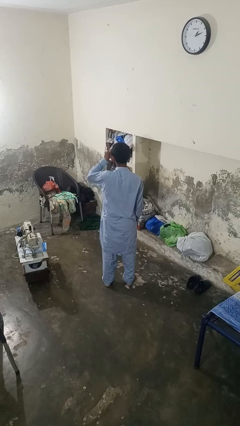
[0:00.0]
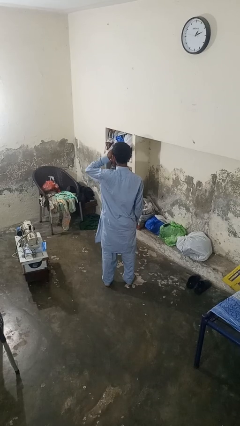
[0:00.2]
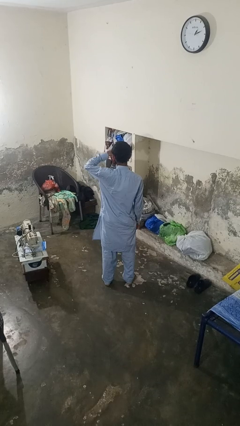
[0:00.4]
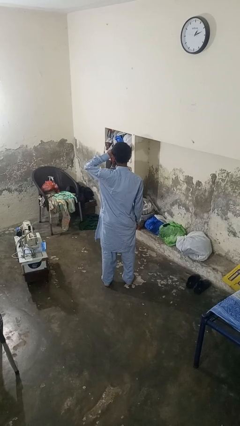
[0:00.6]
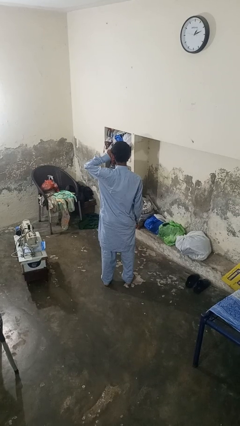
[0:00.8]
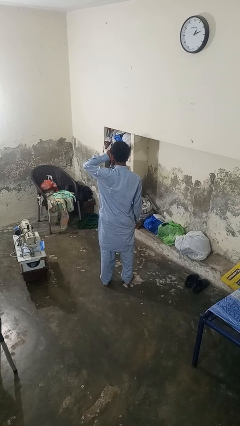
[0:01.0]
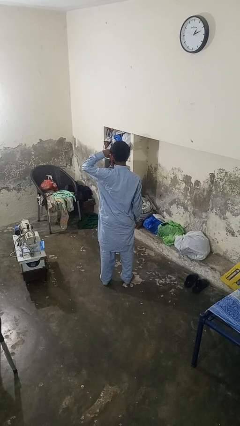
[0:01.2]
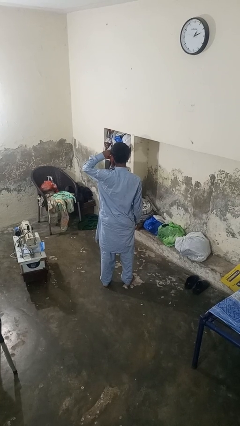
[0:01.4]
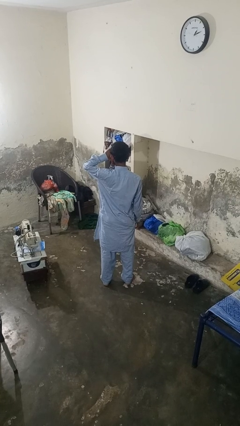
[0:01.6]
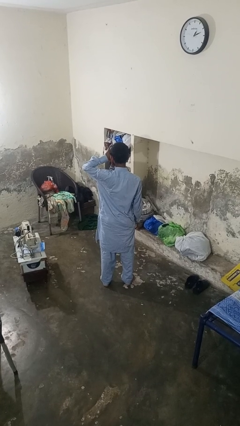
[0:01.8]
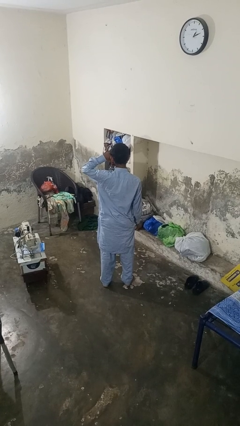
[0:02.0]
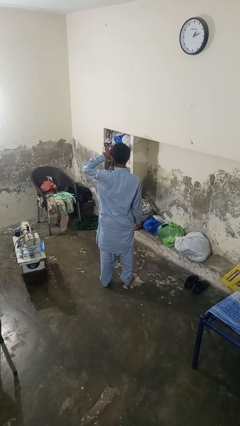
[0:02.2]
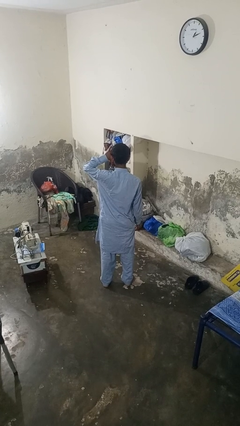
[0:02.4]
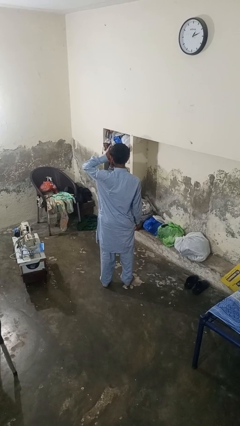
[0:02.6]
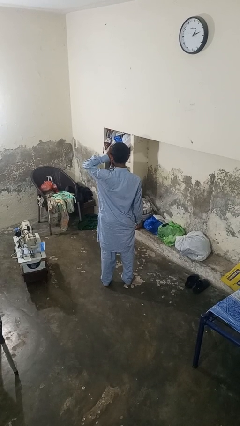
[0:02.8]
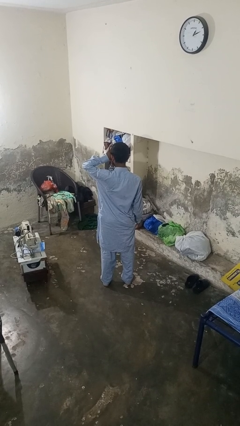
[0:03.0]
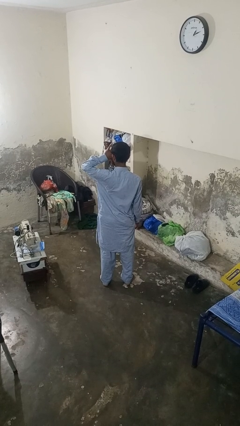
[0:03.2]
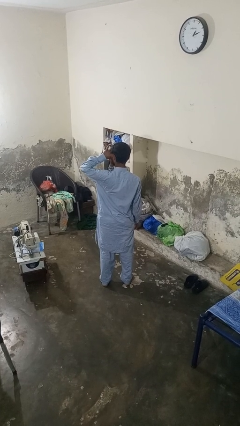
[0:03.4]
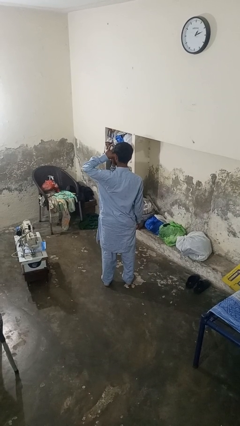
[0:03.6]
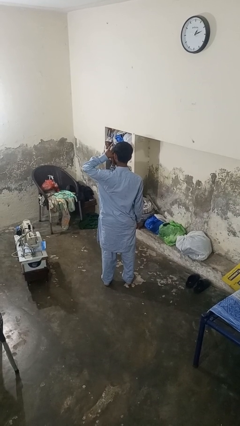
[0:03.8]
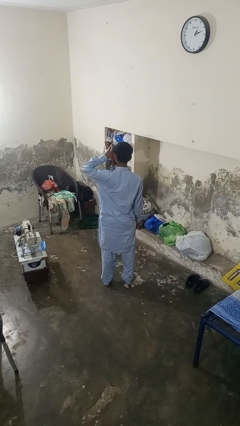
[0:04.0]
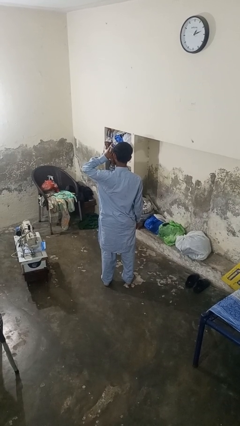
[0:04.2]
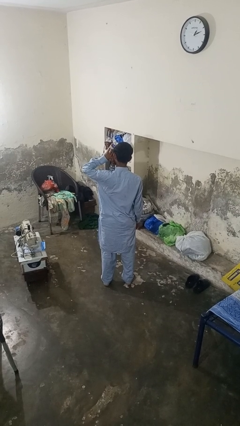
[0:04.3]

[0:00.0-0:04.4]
person rubs eyes

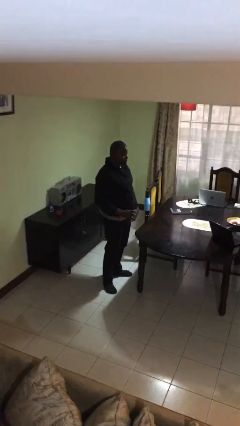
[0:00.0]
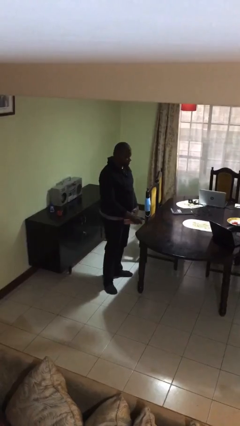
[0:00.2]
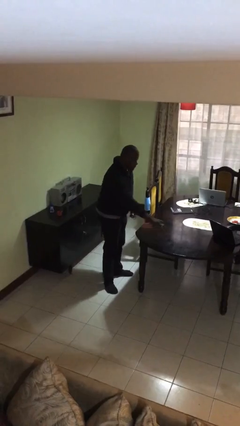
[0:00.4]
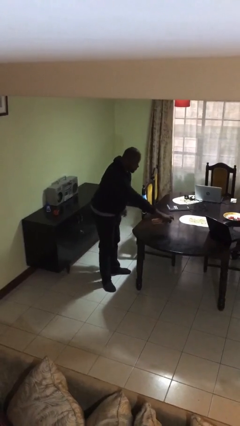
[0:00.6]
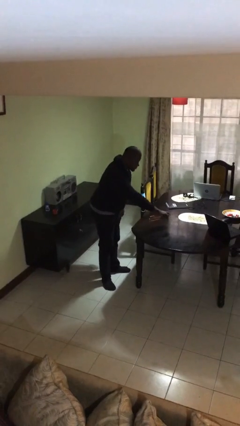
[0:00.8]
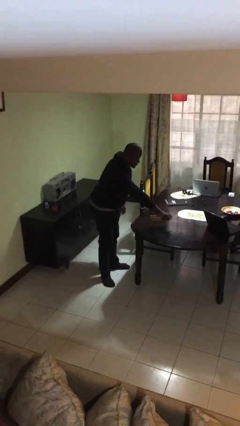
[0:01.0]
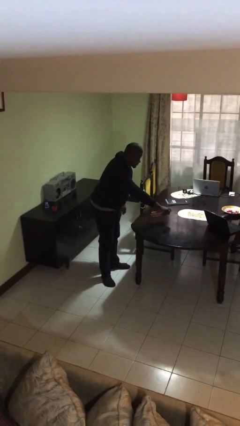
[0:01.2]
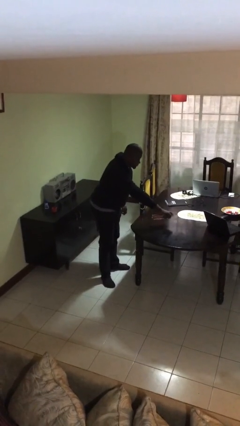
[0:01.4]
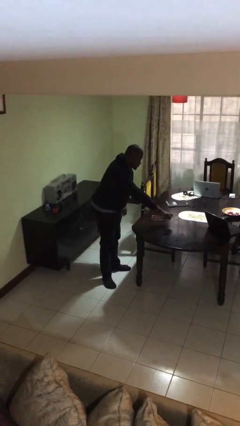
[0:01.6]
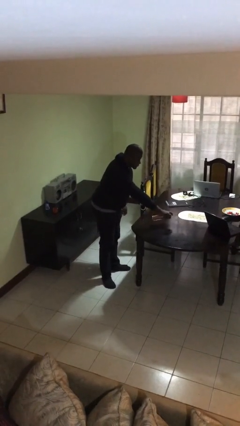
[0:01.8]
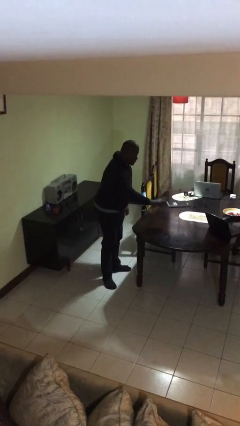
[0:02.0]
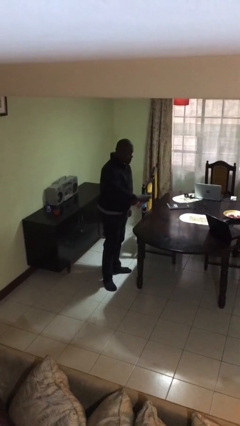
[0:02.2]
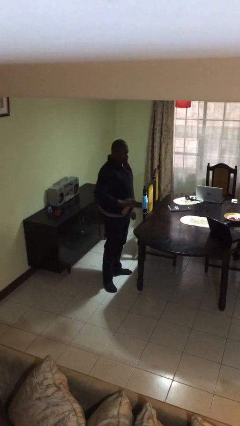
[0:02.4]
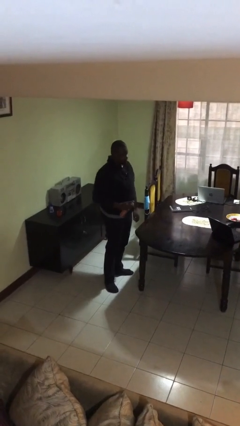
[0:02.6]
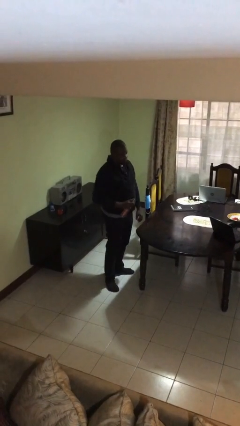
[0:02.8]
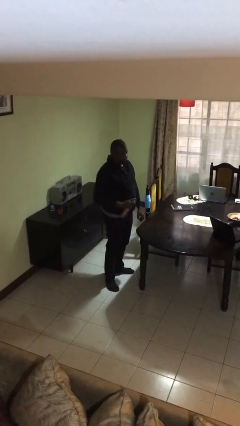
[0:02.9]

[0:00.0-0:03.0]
person sprays from bottle

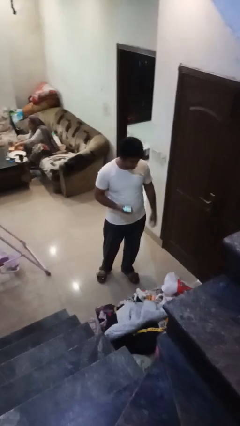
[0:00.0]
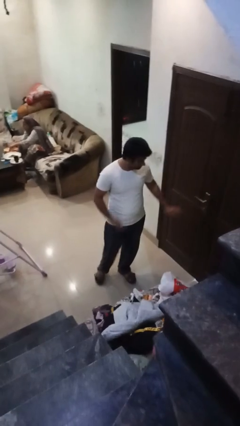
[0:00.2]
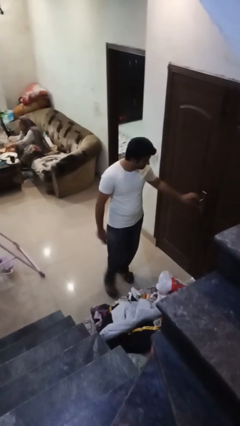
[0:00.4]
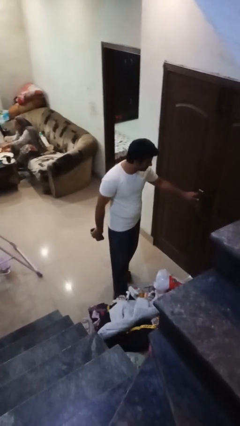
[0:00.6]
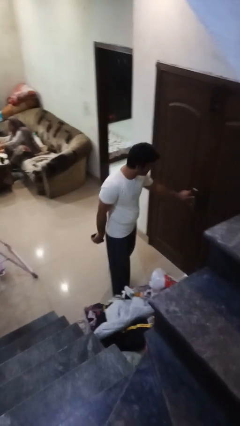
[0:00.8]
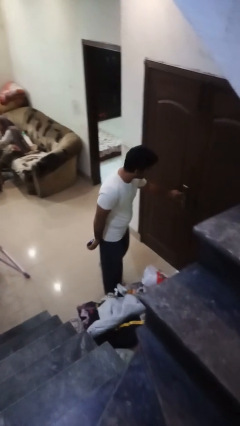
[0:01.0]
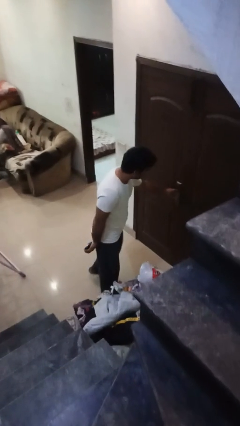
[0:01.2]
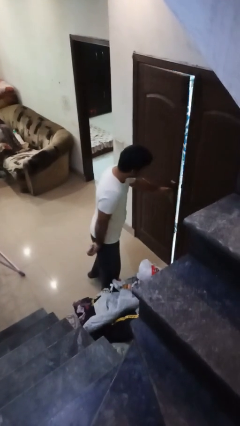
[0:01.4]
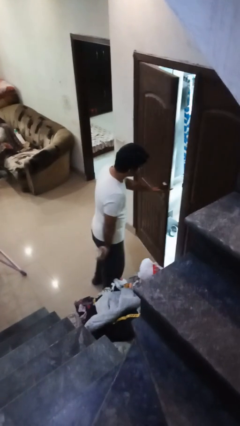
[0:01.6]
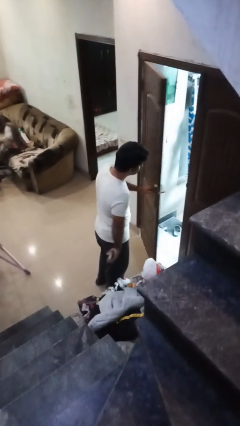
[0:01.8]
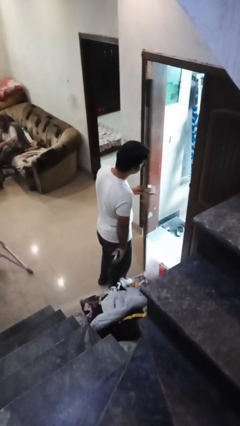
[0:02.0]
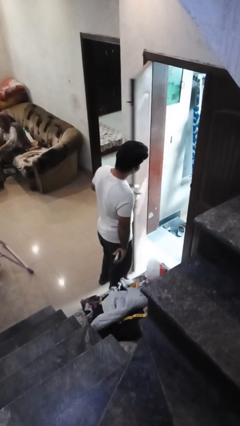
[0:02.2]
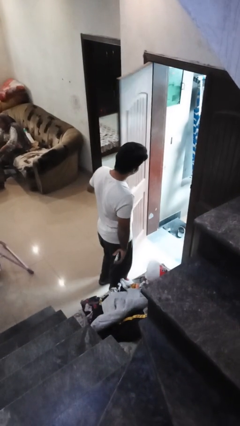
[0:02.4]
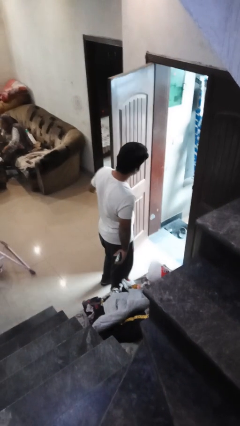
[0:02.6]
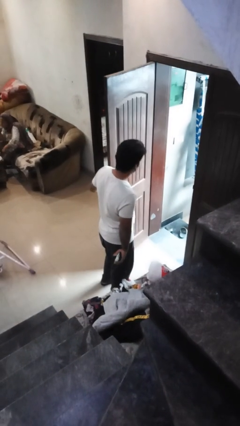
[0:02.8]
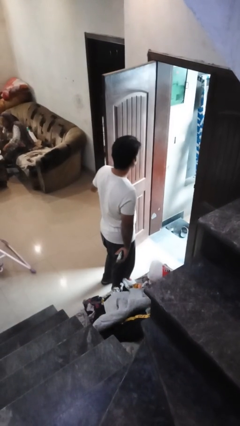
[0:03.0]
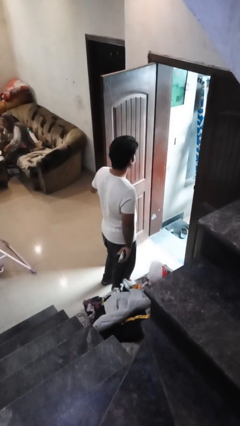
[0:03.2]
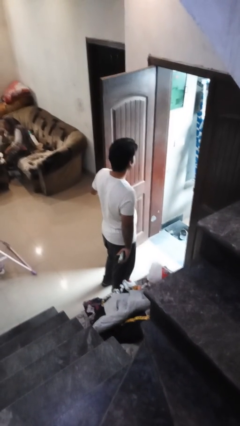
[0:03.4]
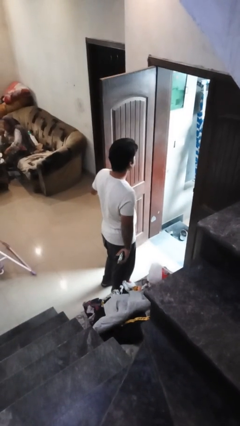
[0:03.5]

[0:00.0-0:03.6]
person opens facility door

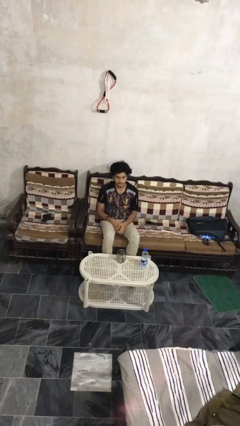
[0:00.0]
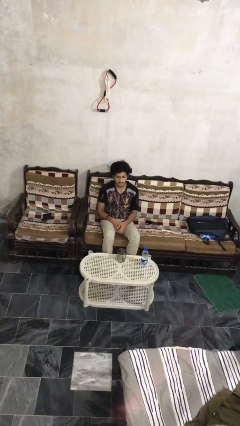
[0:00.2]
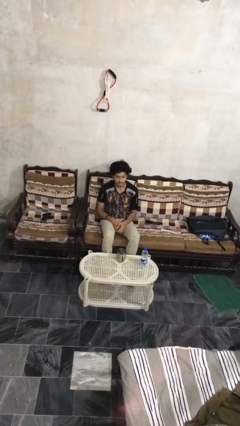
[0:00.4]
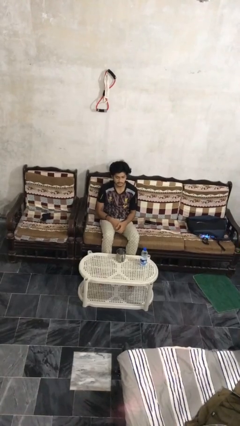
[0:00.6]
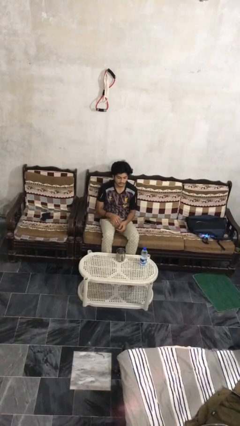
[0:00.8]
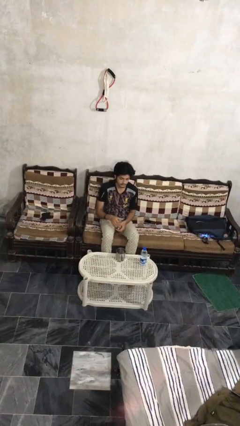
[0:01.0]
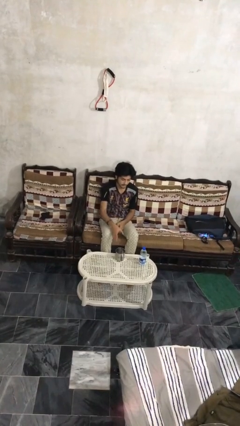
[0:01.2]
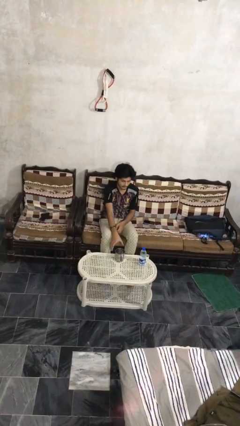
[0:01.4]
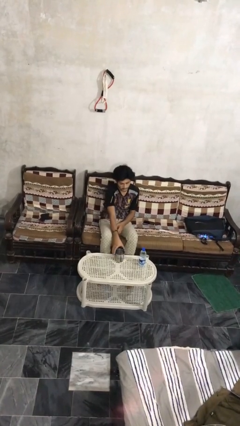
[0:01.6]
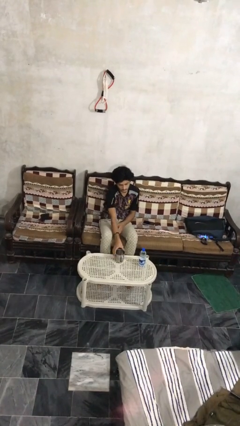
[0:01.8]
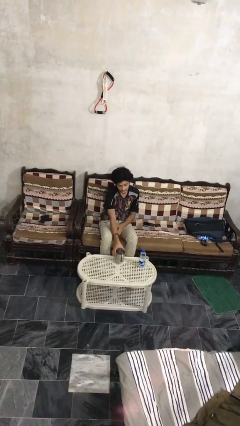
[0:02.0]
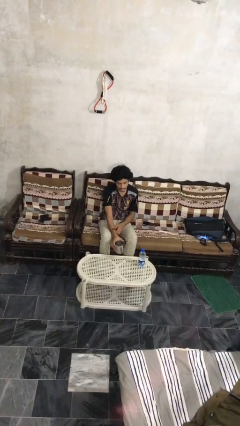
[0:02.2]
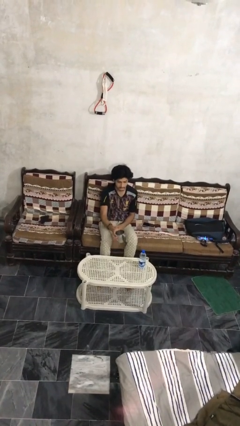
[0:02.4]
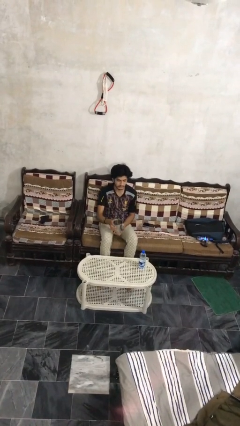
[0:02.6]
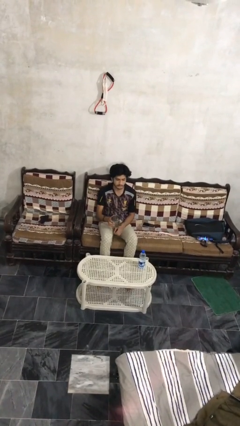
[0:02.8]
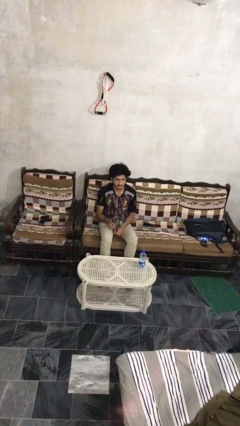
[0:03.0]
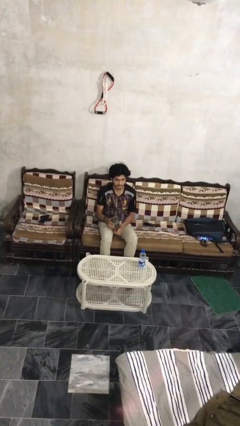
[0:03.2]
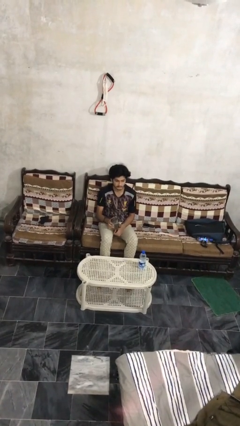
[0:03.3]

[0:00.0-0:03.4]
person picks up object from table

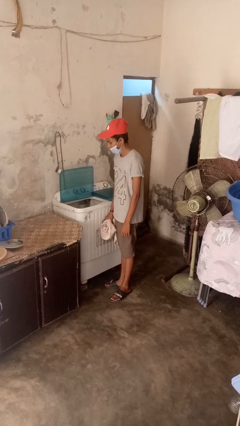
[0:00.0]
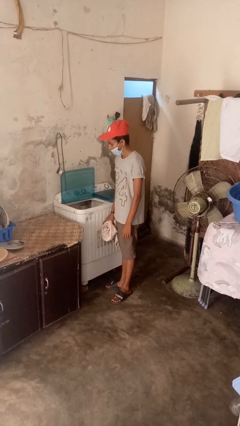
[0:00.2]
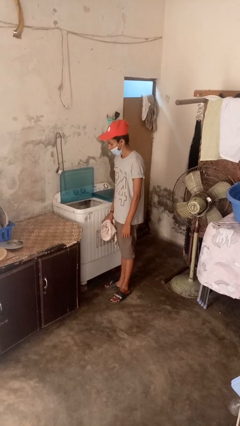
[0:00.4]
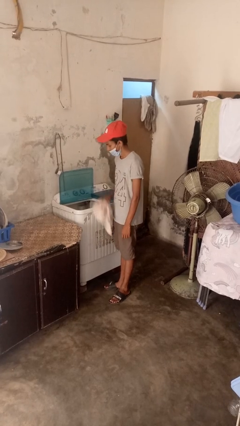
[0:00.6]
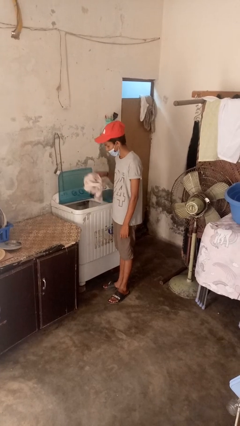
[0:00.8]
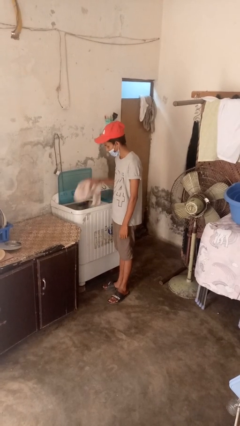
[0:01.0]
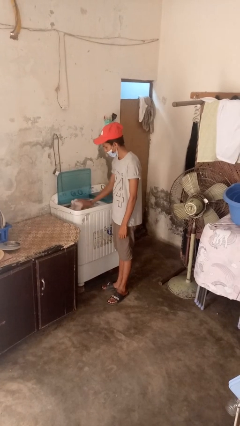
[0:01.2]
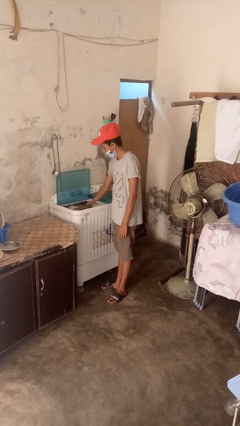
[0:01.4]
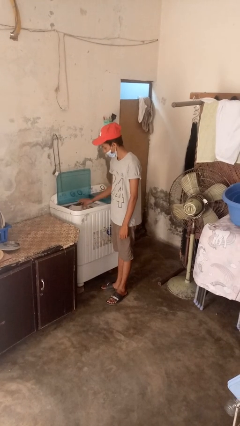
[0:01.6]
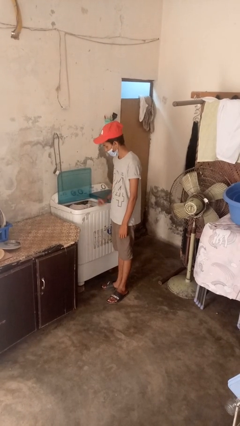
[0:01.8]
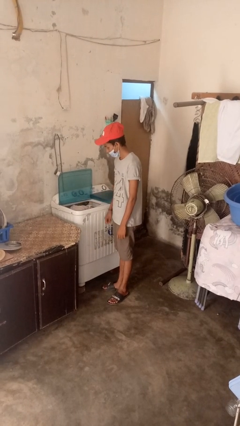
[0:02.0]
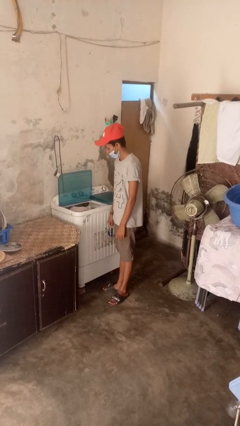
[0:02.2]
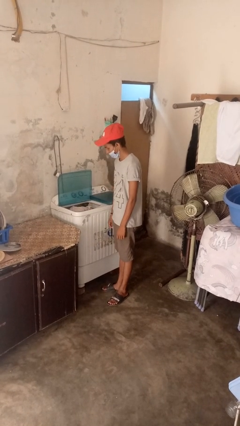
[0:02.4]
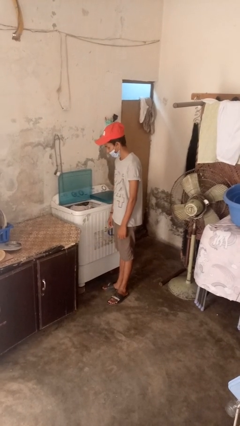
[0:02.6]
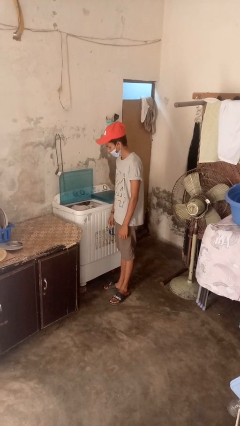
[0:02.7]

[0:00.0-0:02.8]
person loads dryer

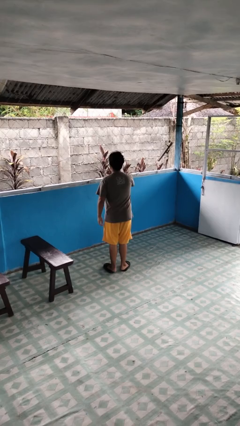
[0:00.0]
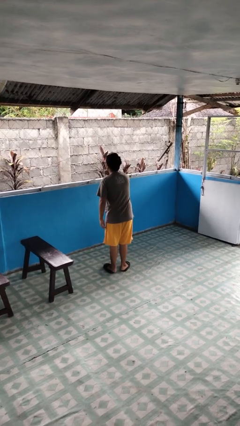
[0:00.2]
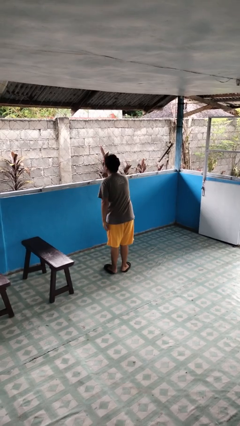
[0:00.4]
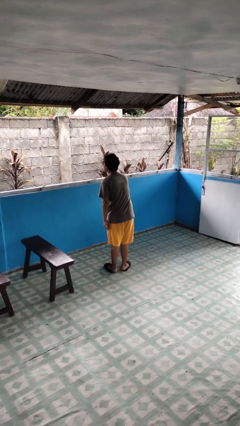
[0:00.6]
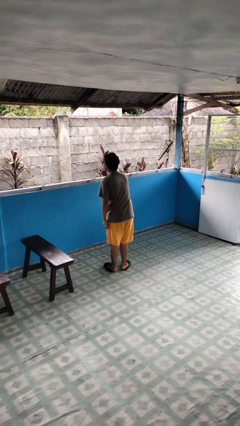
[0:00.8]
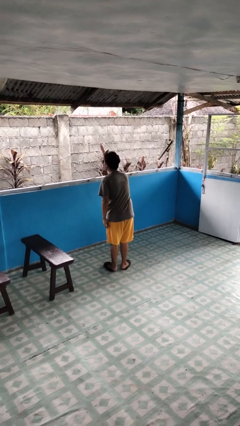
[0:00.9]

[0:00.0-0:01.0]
person gestures be quiet
